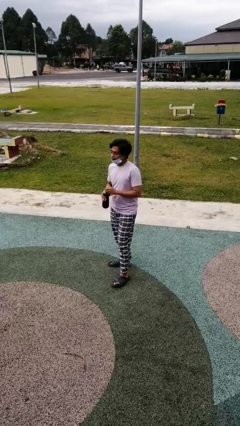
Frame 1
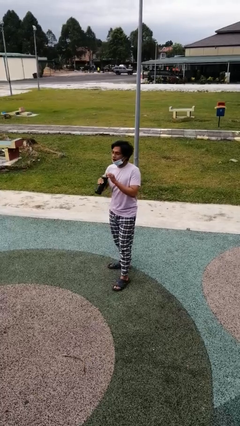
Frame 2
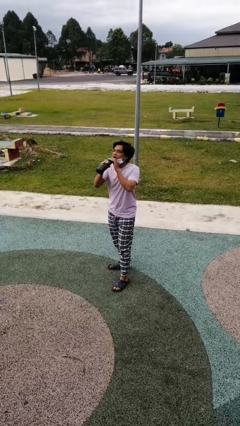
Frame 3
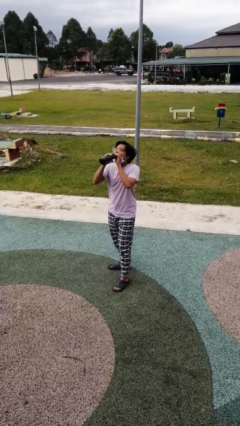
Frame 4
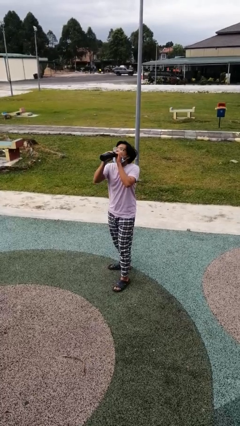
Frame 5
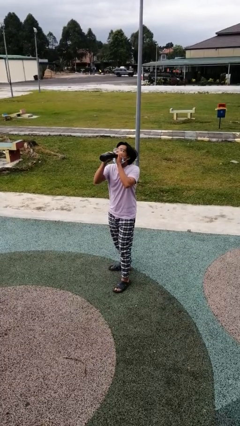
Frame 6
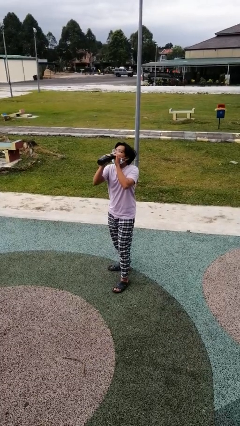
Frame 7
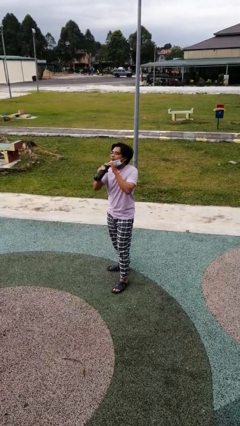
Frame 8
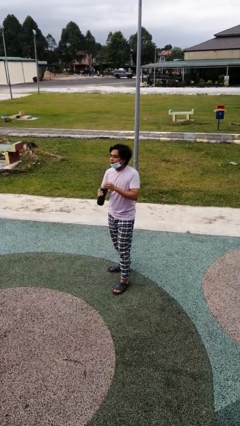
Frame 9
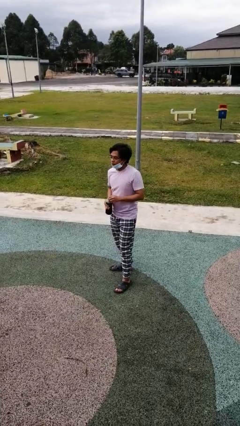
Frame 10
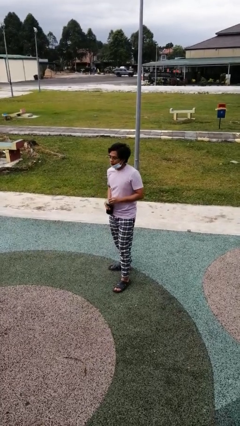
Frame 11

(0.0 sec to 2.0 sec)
person drinks from bottle

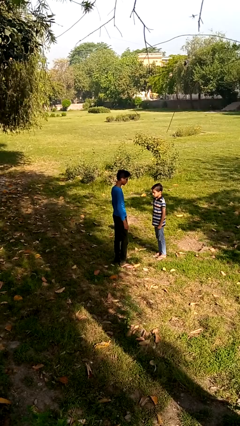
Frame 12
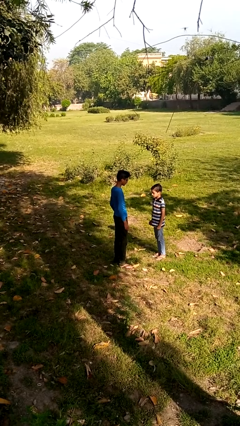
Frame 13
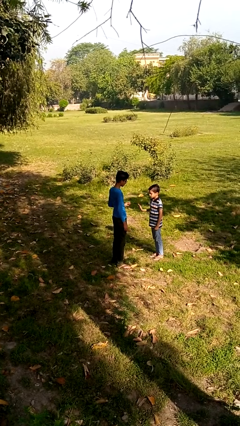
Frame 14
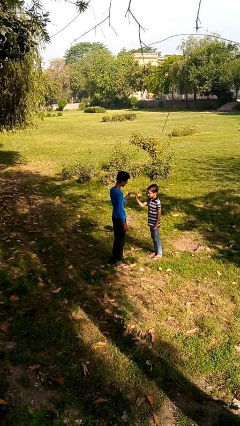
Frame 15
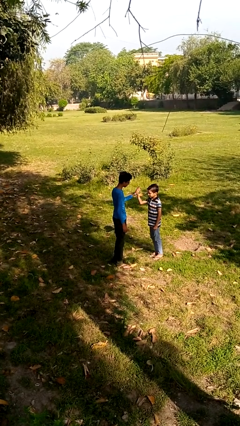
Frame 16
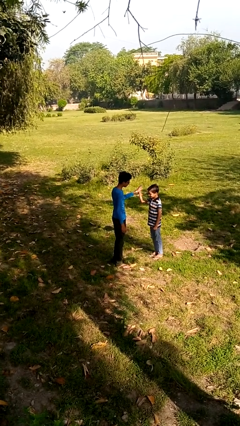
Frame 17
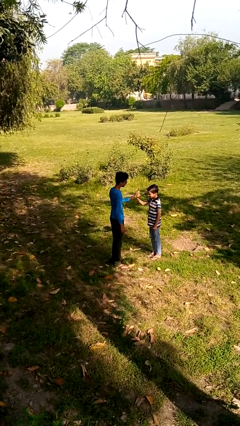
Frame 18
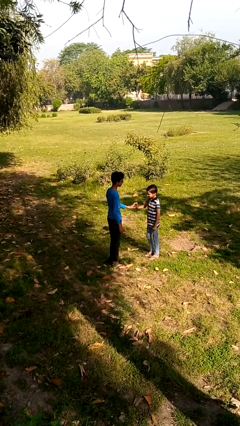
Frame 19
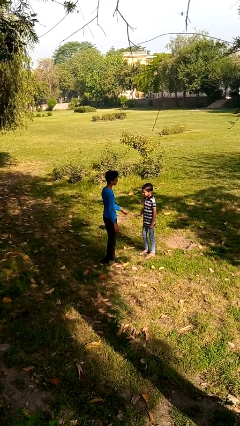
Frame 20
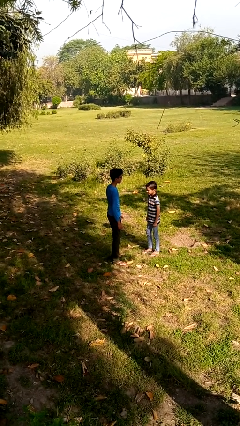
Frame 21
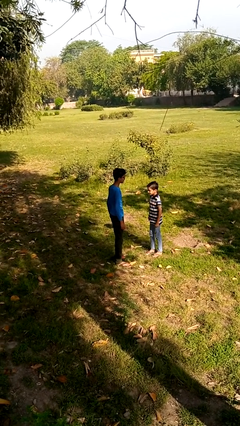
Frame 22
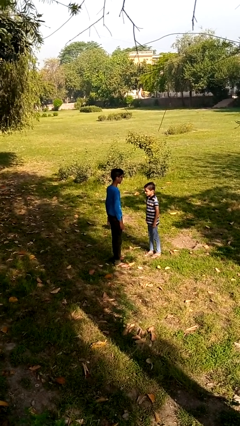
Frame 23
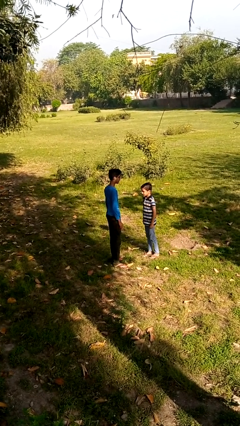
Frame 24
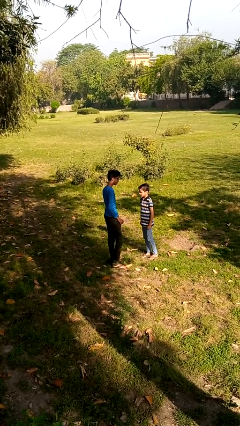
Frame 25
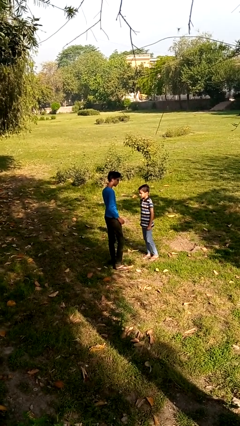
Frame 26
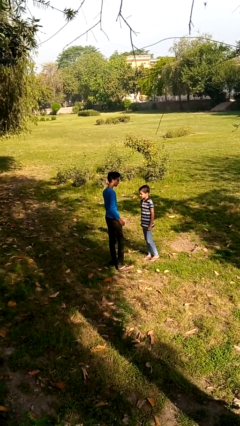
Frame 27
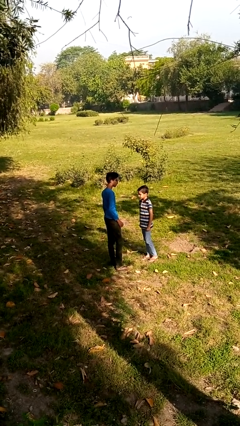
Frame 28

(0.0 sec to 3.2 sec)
person highfives hand

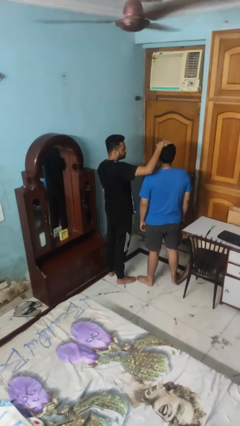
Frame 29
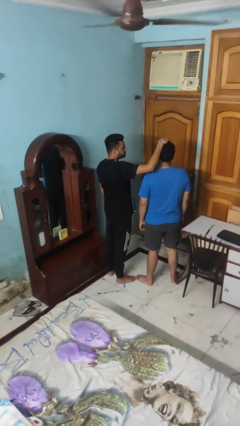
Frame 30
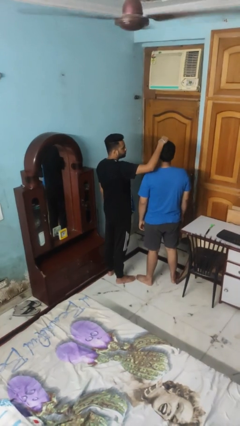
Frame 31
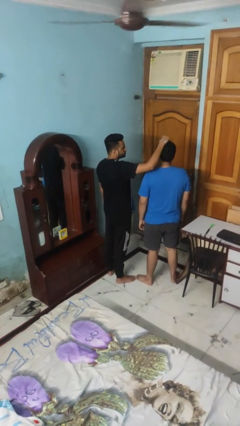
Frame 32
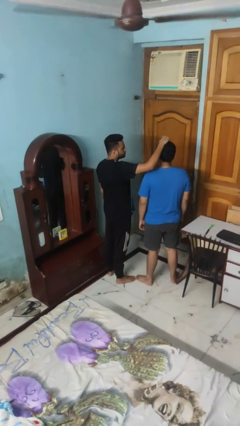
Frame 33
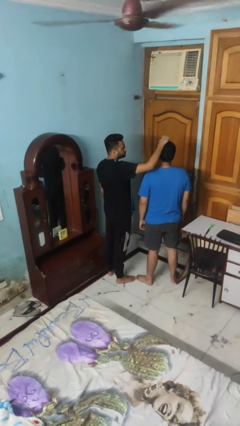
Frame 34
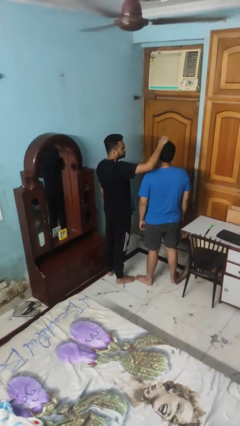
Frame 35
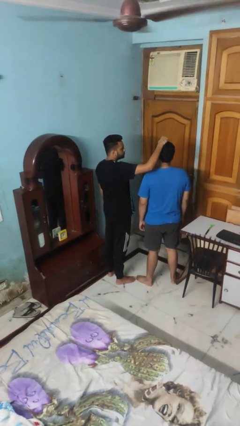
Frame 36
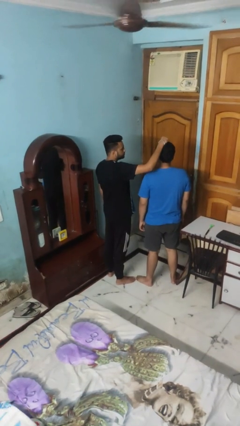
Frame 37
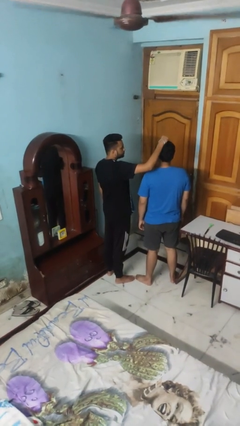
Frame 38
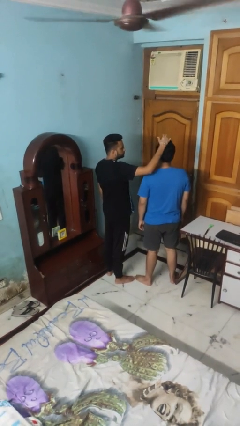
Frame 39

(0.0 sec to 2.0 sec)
person grabs person by hair

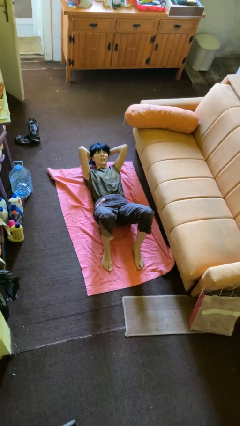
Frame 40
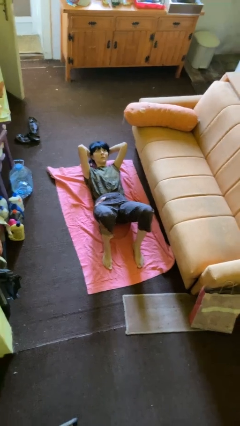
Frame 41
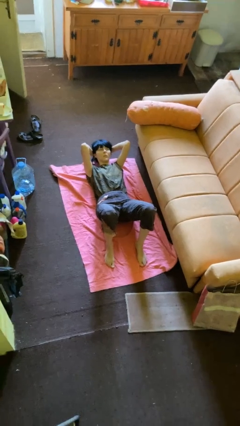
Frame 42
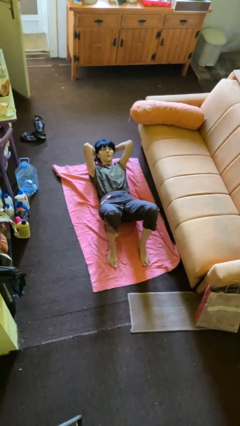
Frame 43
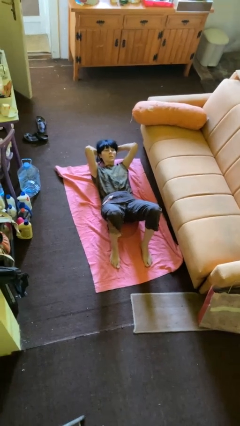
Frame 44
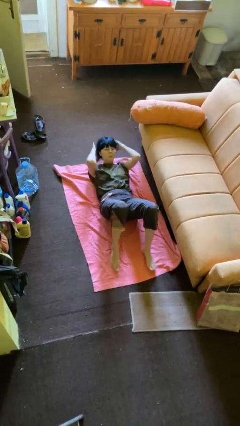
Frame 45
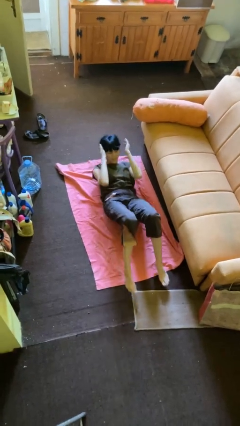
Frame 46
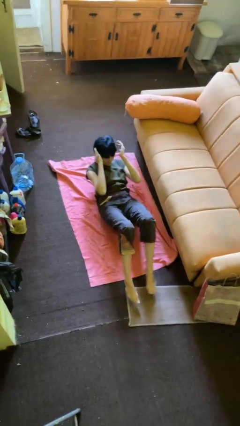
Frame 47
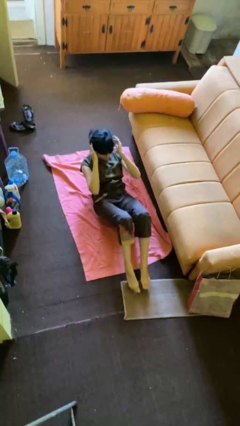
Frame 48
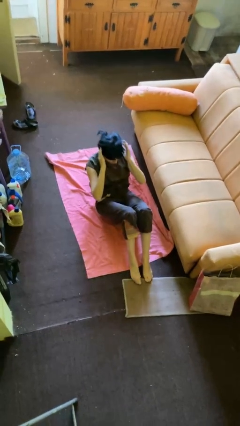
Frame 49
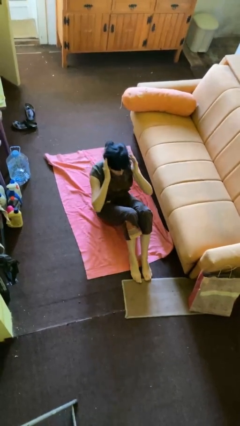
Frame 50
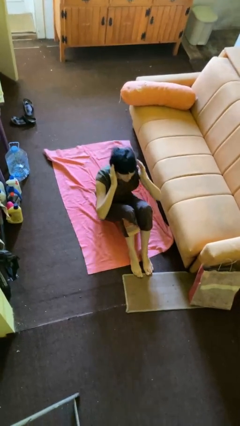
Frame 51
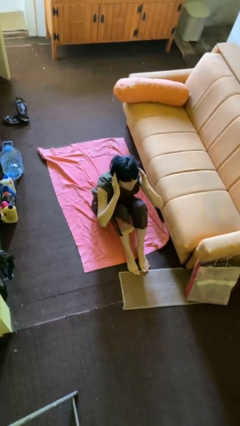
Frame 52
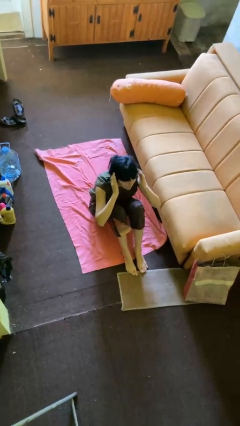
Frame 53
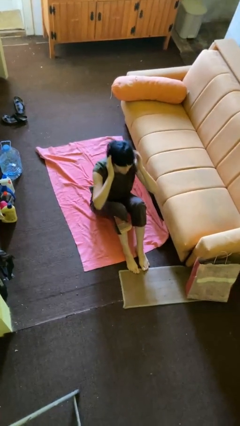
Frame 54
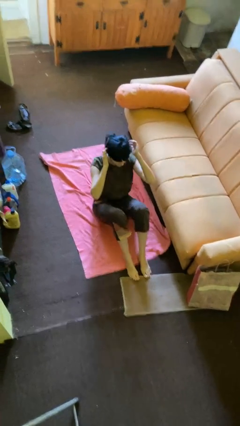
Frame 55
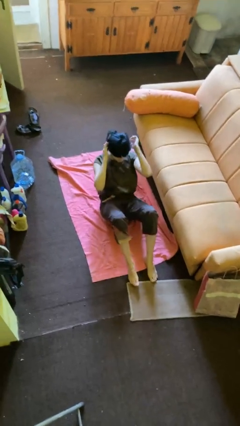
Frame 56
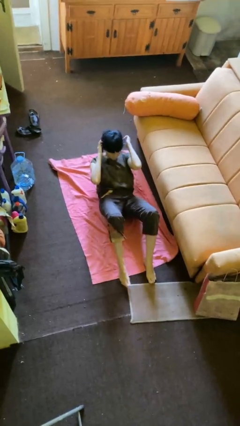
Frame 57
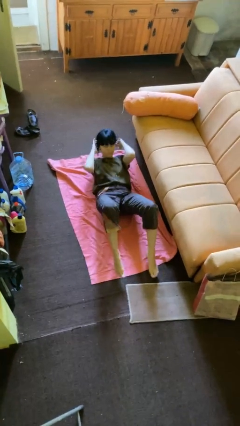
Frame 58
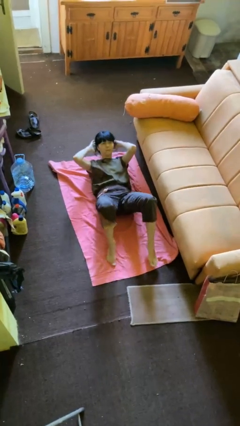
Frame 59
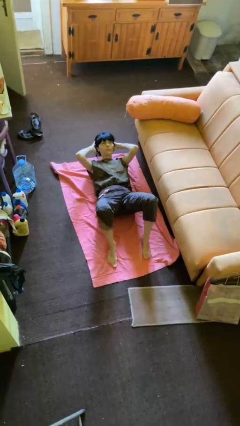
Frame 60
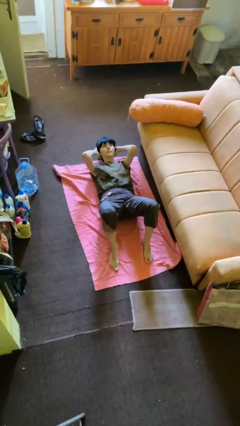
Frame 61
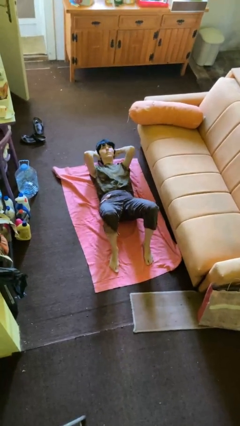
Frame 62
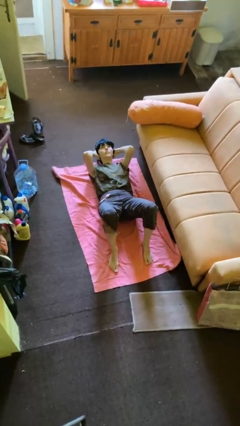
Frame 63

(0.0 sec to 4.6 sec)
person exercises with situp

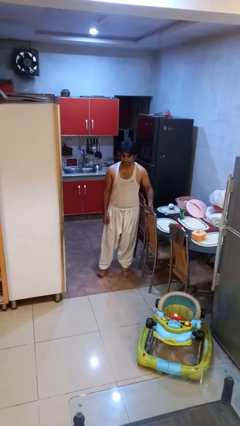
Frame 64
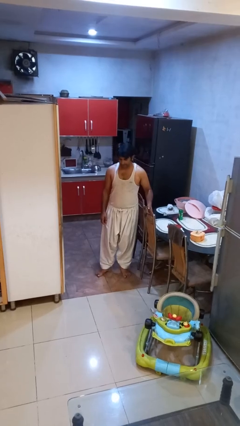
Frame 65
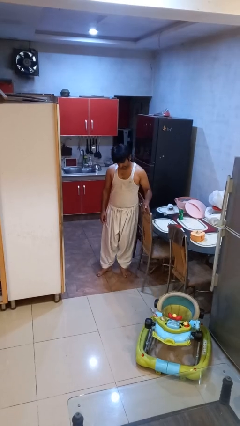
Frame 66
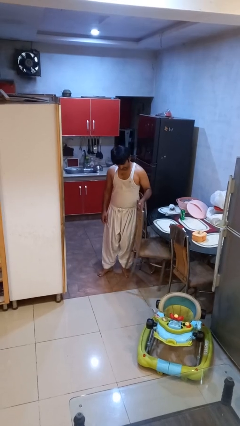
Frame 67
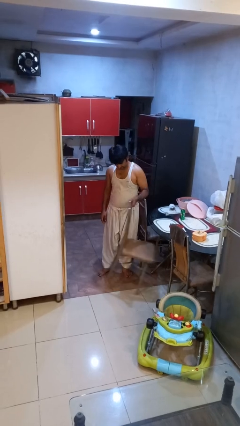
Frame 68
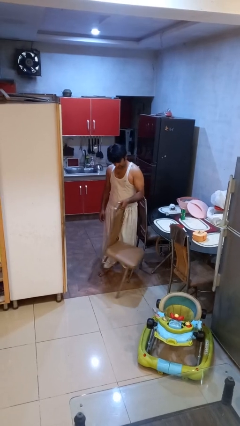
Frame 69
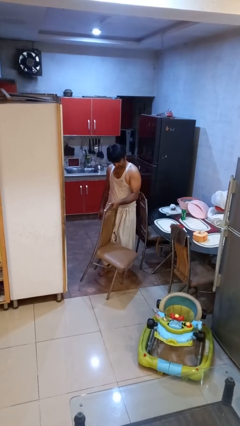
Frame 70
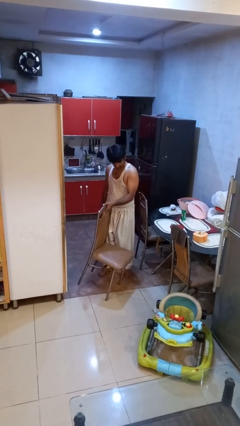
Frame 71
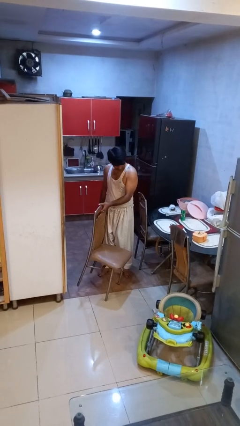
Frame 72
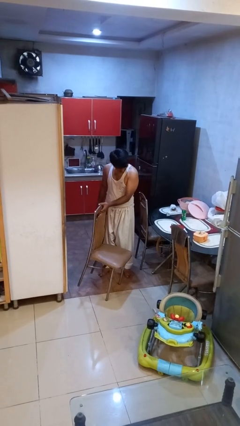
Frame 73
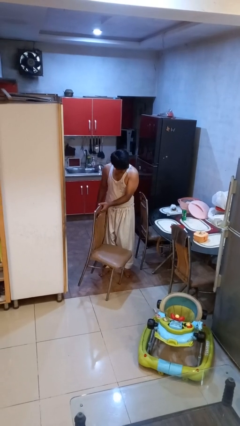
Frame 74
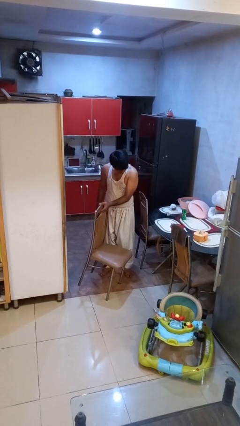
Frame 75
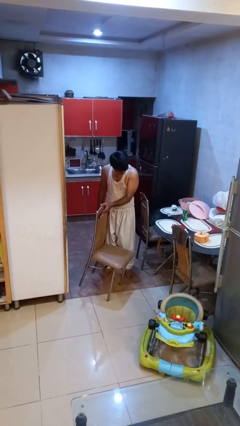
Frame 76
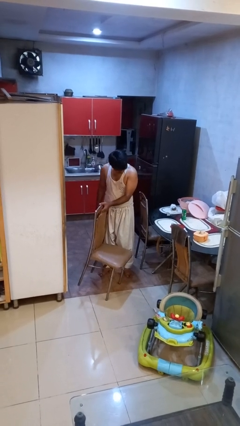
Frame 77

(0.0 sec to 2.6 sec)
person pulls out chair

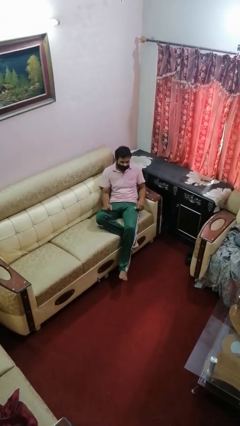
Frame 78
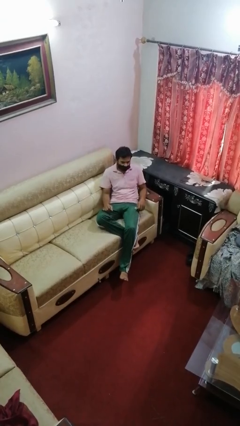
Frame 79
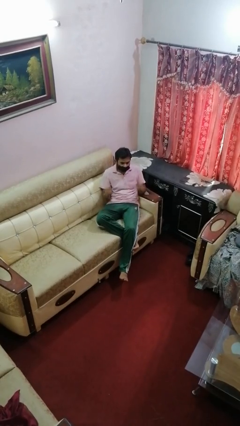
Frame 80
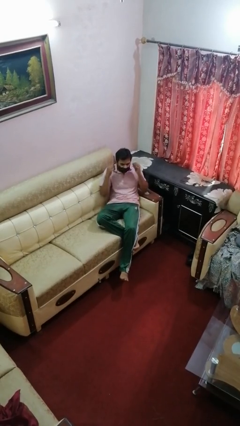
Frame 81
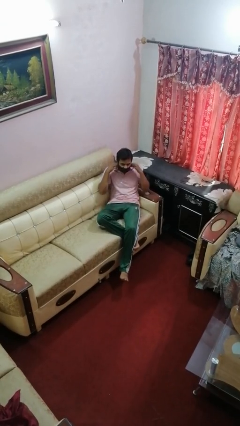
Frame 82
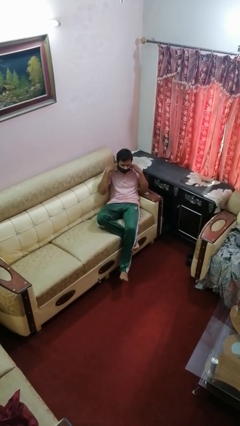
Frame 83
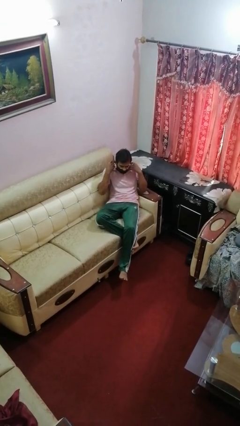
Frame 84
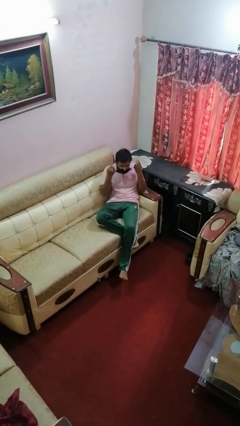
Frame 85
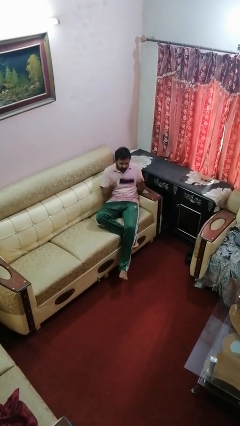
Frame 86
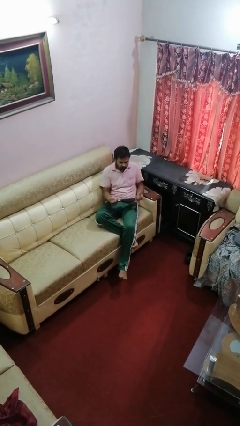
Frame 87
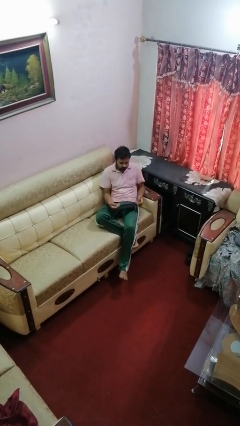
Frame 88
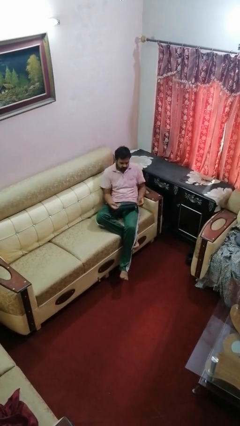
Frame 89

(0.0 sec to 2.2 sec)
person takes off facemask

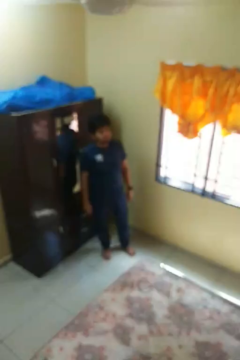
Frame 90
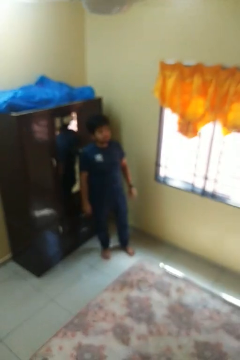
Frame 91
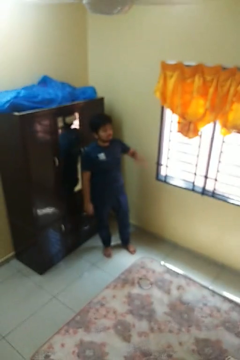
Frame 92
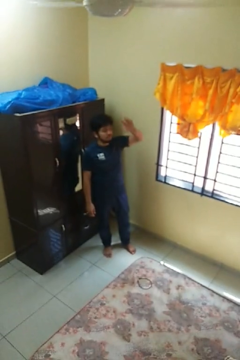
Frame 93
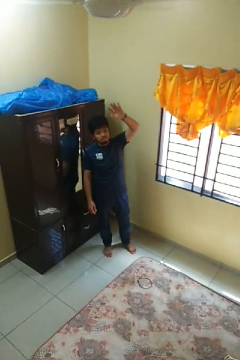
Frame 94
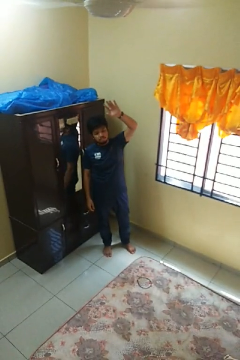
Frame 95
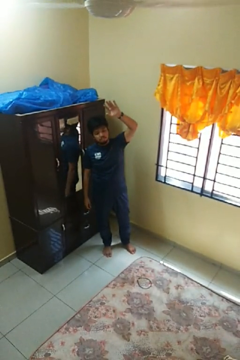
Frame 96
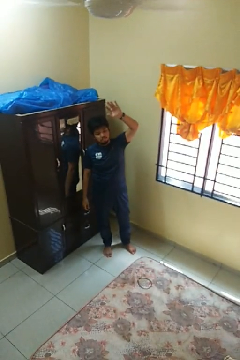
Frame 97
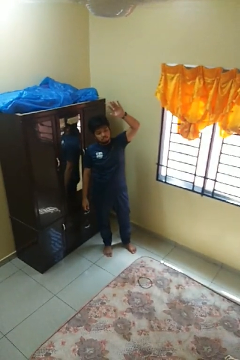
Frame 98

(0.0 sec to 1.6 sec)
person gestures raise hand
